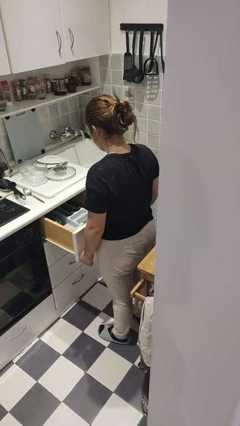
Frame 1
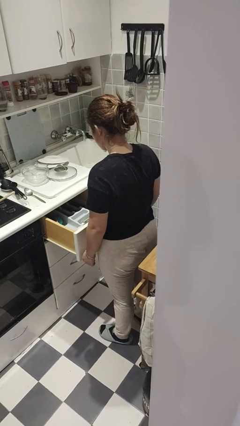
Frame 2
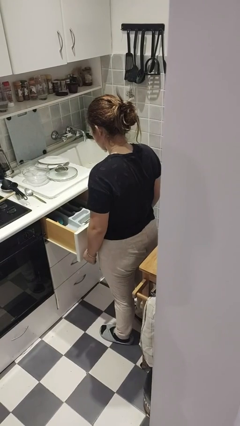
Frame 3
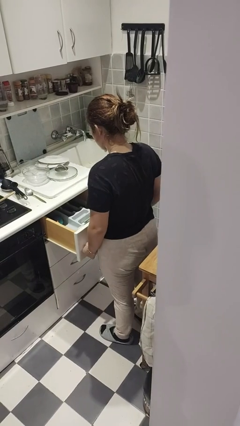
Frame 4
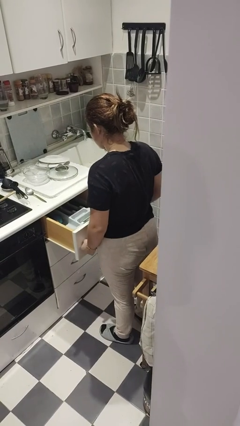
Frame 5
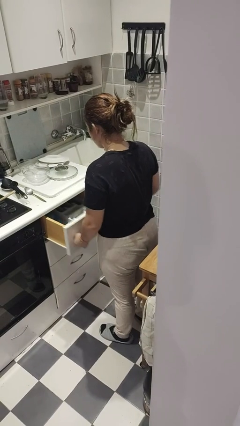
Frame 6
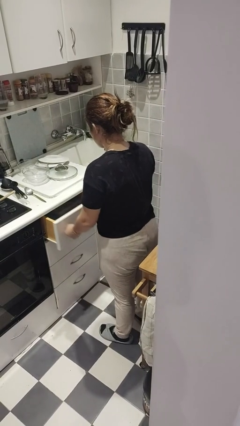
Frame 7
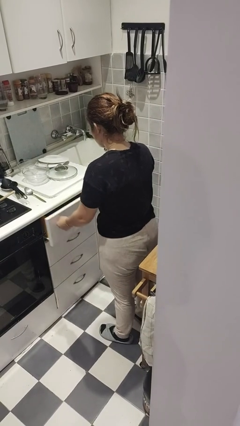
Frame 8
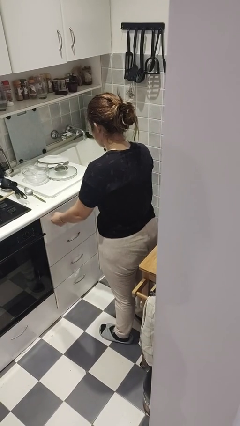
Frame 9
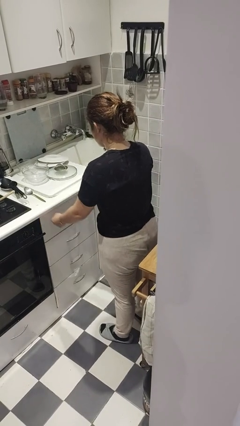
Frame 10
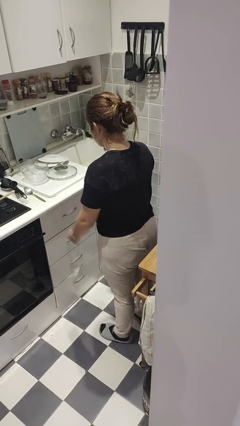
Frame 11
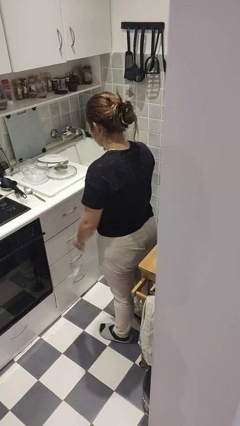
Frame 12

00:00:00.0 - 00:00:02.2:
person closes kitchen drawer

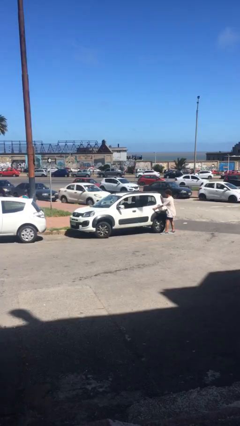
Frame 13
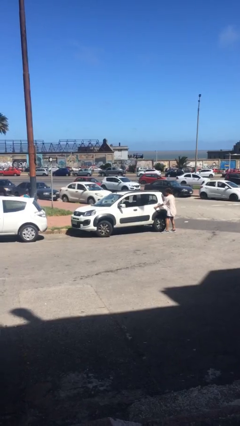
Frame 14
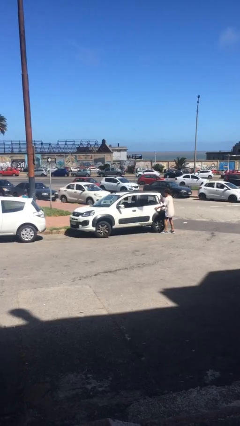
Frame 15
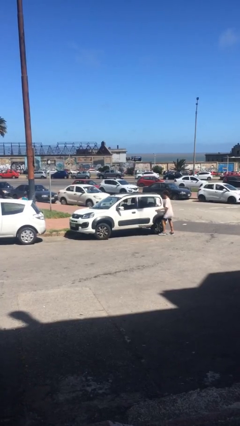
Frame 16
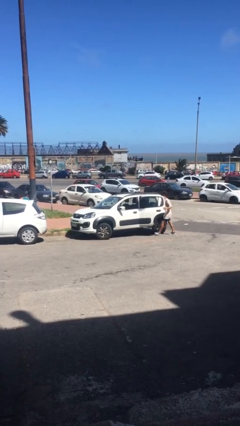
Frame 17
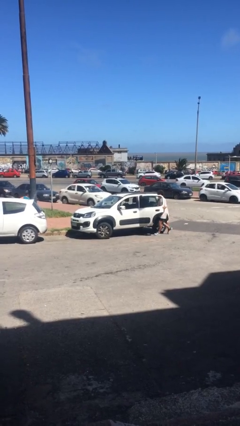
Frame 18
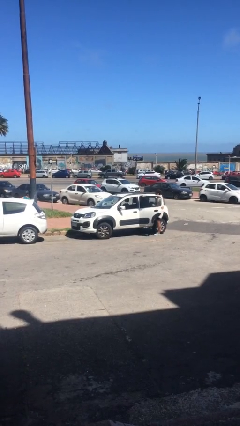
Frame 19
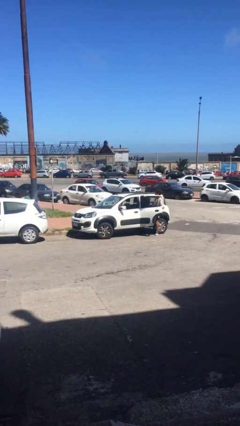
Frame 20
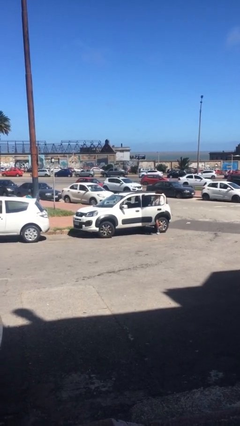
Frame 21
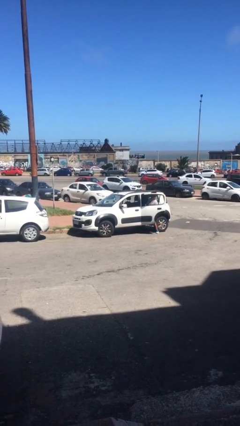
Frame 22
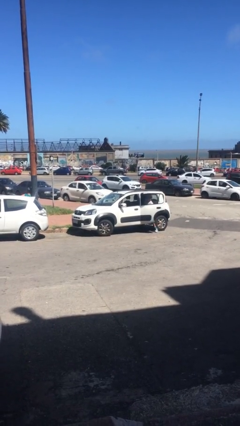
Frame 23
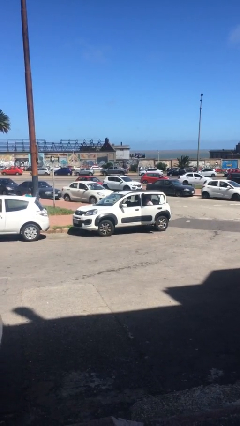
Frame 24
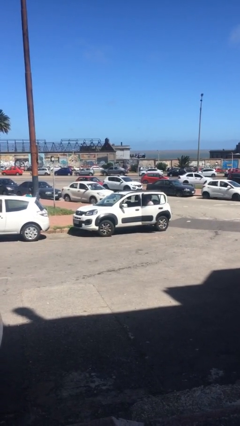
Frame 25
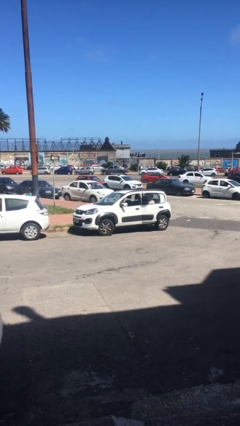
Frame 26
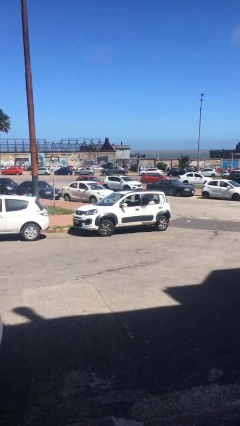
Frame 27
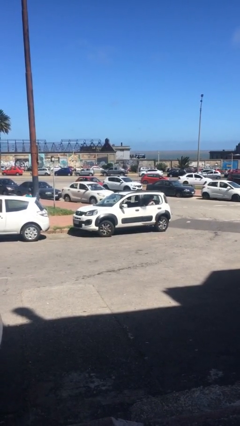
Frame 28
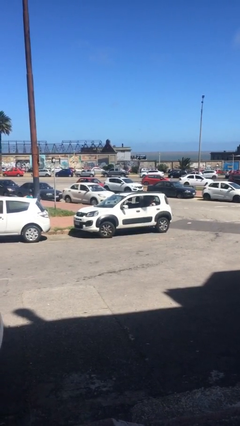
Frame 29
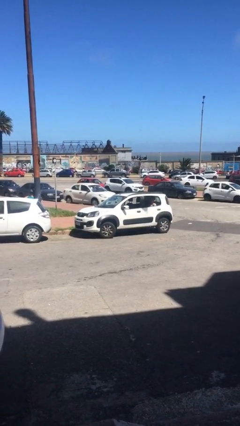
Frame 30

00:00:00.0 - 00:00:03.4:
car picks up person

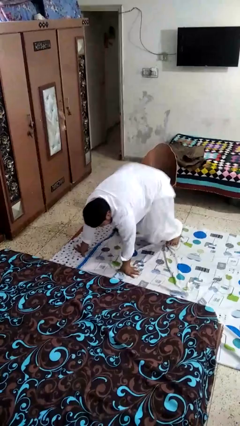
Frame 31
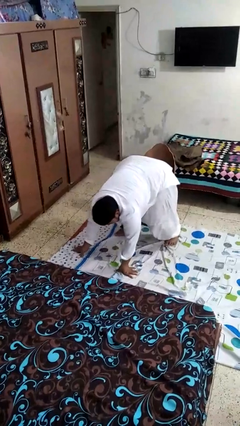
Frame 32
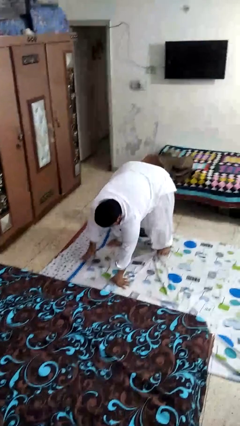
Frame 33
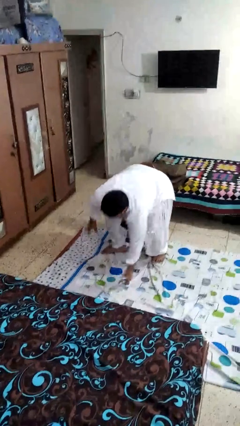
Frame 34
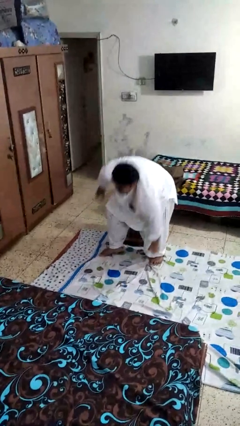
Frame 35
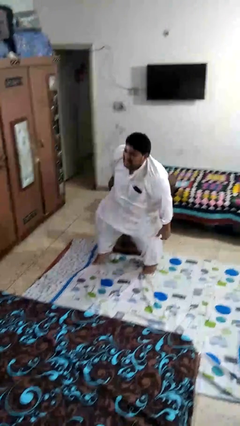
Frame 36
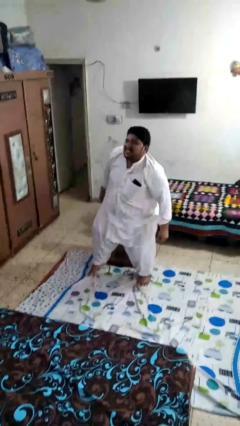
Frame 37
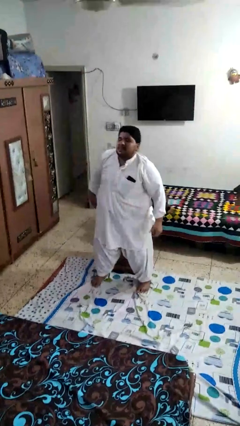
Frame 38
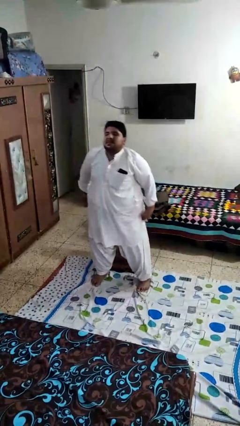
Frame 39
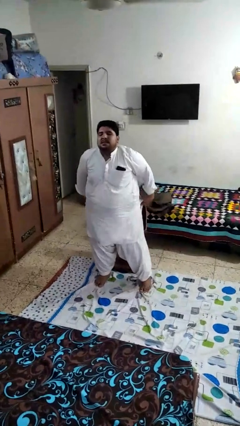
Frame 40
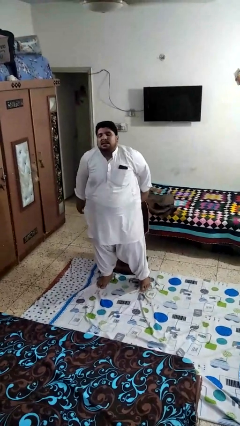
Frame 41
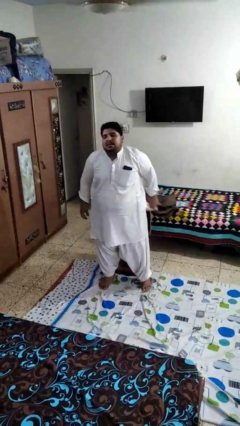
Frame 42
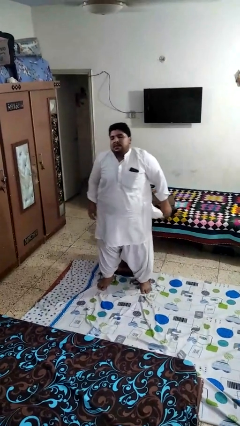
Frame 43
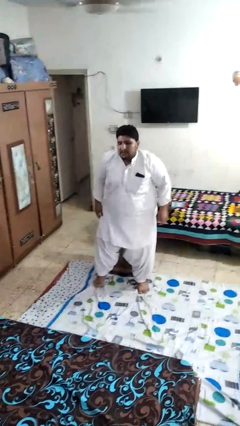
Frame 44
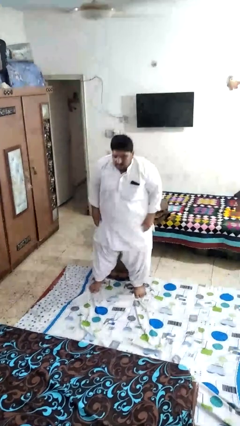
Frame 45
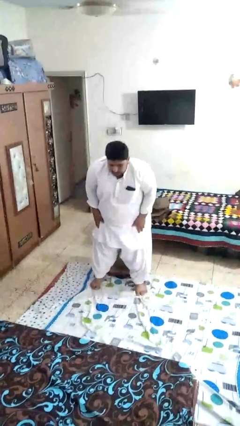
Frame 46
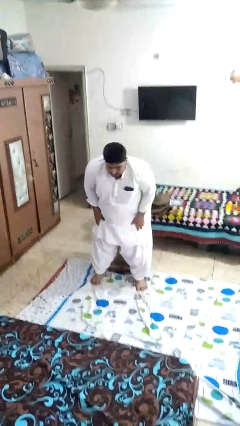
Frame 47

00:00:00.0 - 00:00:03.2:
person stands up from floor

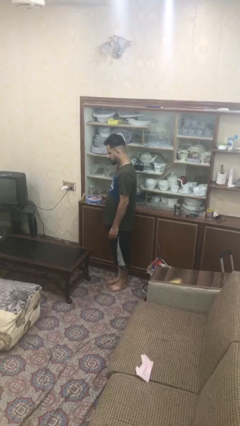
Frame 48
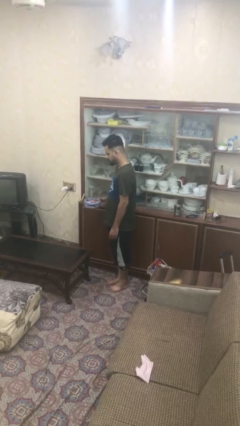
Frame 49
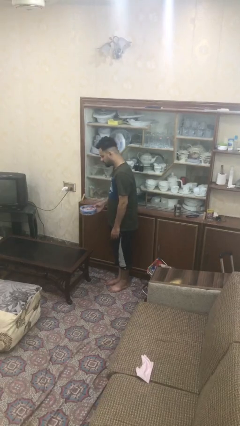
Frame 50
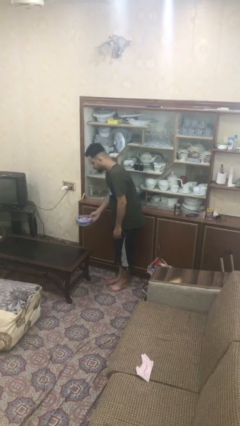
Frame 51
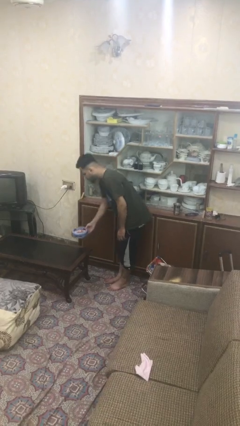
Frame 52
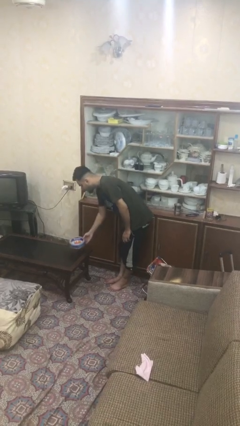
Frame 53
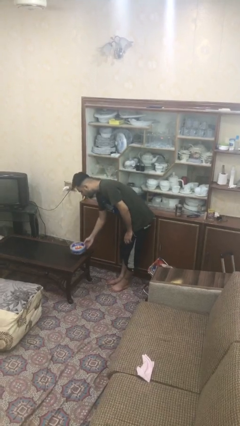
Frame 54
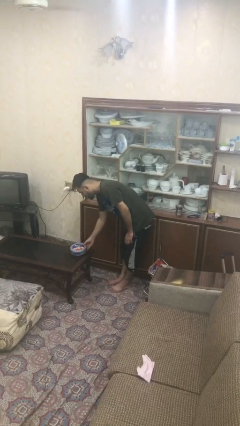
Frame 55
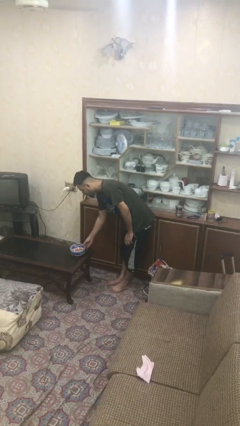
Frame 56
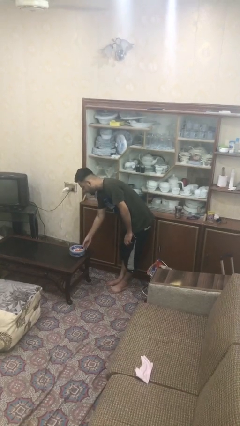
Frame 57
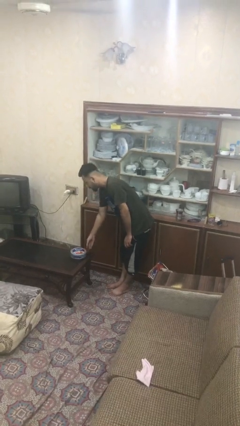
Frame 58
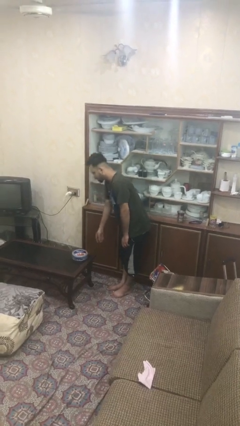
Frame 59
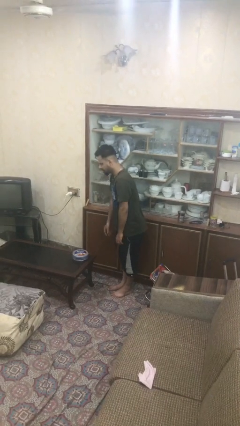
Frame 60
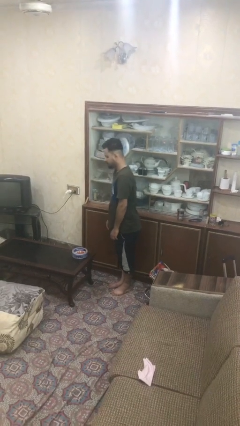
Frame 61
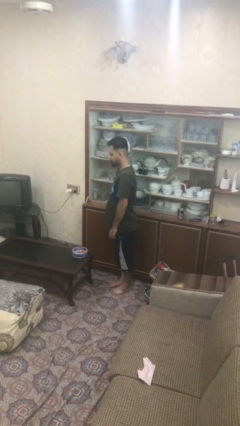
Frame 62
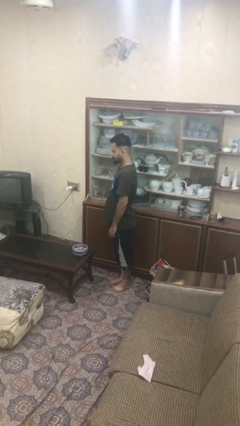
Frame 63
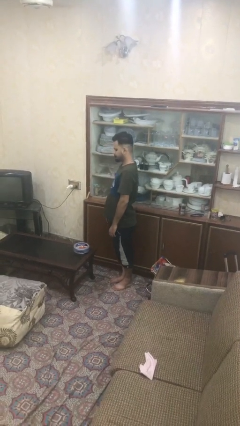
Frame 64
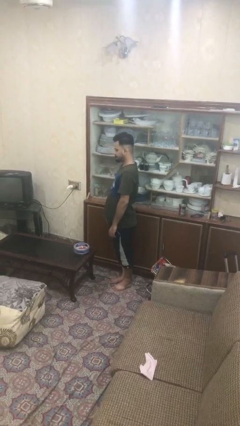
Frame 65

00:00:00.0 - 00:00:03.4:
person puts down object on table

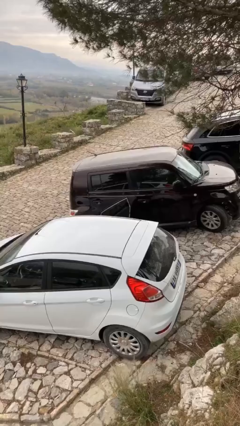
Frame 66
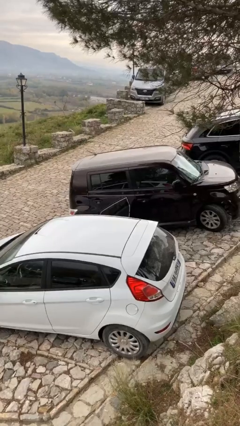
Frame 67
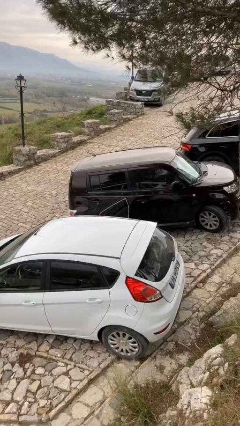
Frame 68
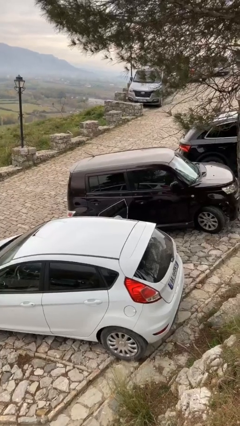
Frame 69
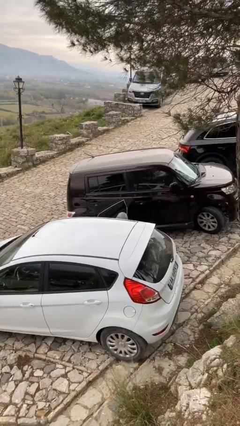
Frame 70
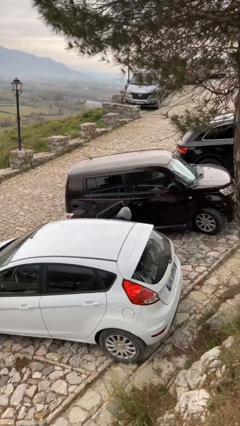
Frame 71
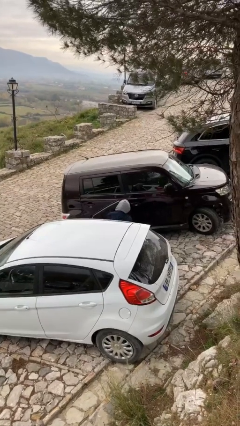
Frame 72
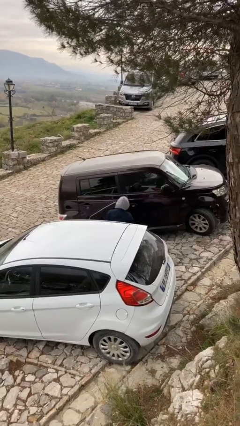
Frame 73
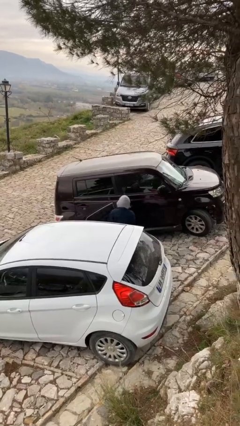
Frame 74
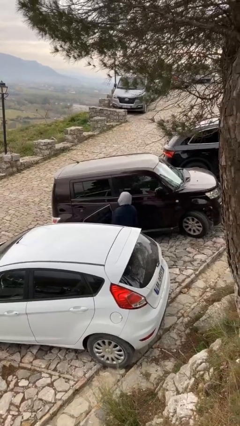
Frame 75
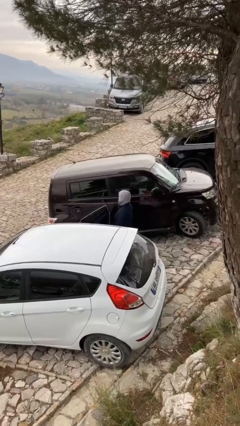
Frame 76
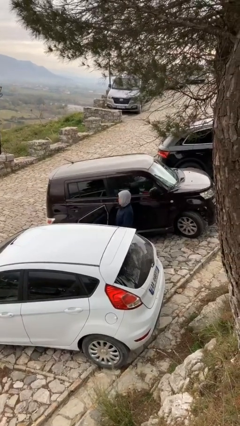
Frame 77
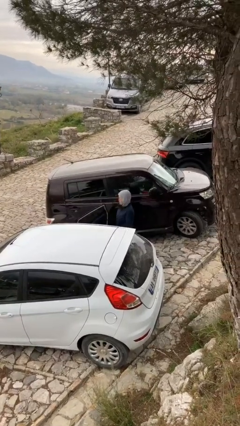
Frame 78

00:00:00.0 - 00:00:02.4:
person exits car
